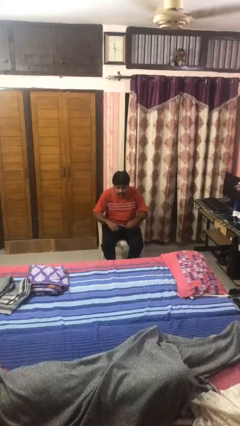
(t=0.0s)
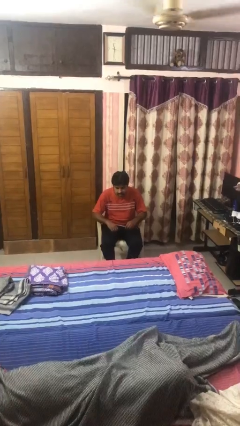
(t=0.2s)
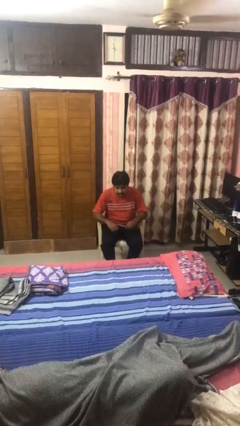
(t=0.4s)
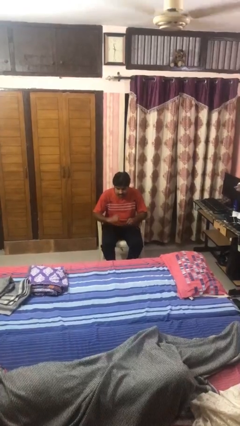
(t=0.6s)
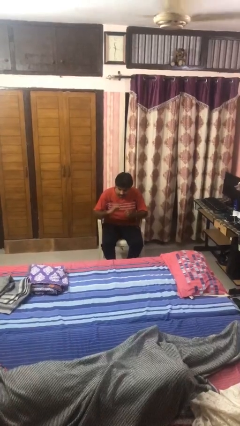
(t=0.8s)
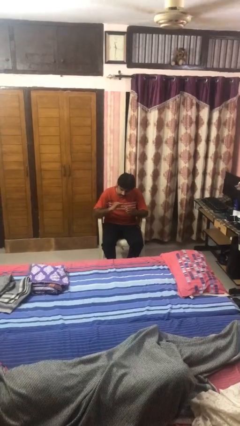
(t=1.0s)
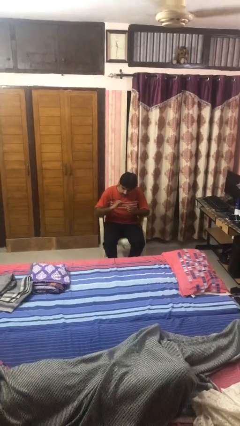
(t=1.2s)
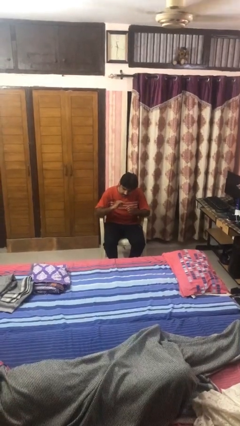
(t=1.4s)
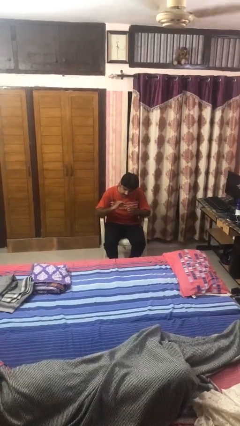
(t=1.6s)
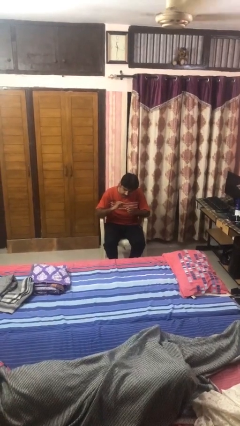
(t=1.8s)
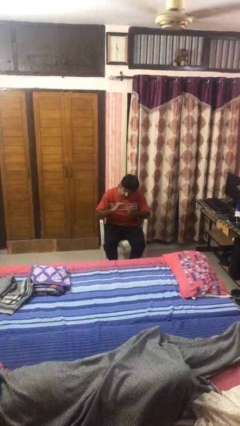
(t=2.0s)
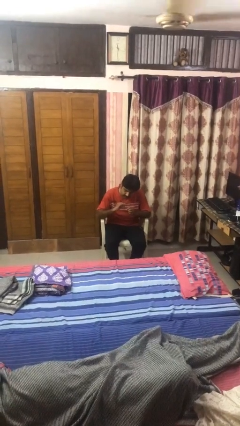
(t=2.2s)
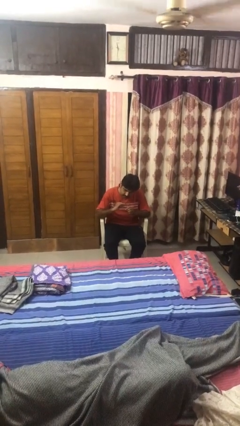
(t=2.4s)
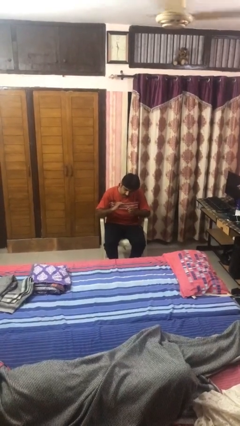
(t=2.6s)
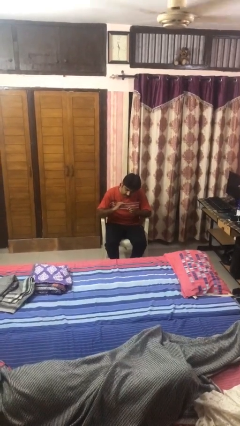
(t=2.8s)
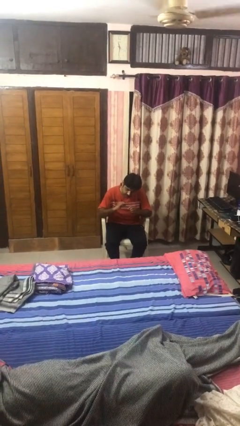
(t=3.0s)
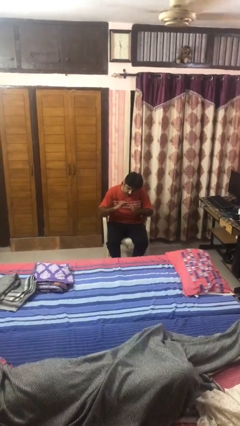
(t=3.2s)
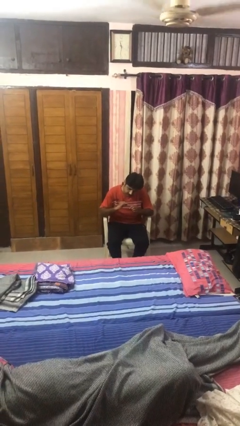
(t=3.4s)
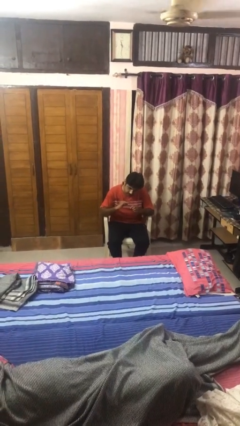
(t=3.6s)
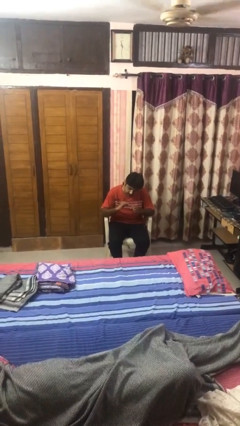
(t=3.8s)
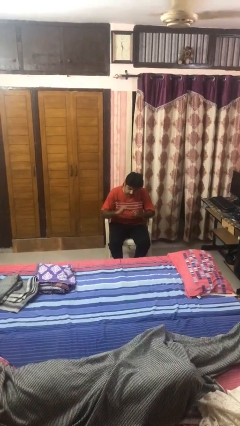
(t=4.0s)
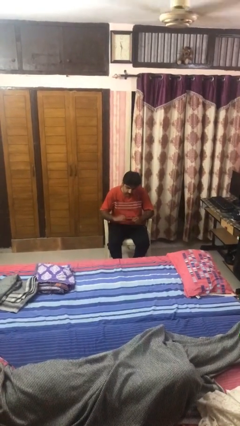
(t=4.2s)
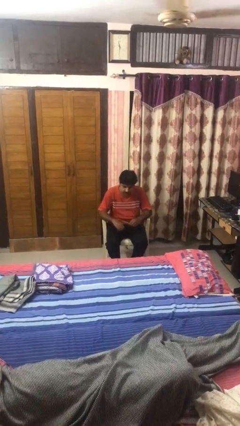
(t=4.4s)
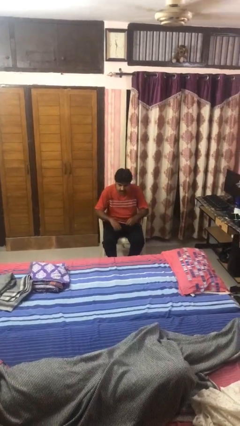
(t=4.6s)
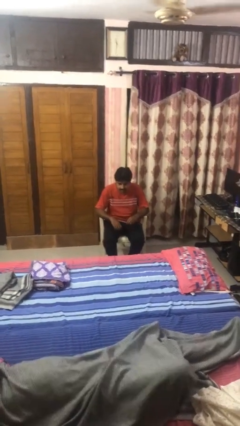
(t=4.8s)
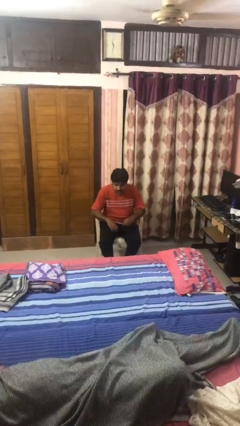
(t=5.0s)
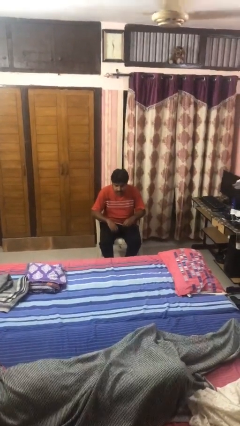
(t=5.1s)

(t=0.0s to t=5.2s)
person files fingernails

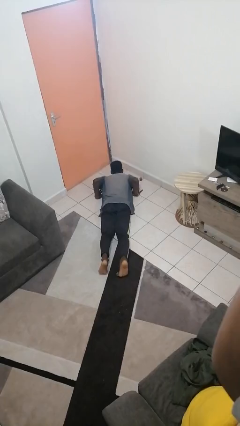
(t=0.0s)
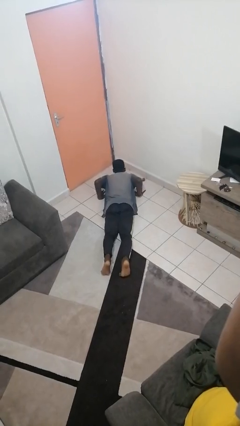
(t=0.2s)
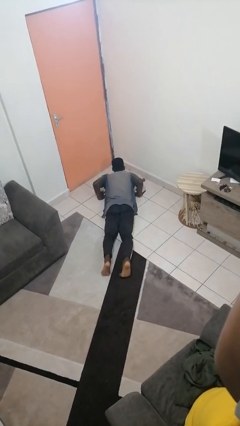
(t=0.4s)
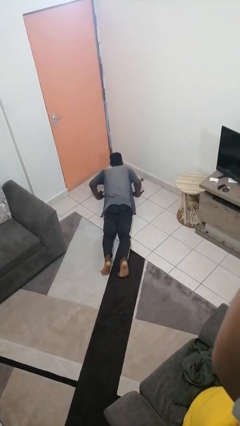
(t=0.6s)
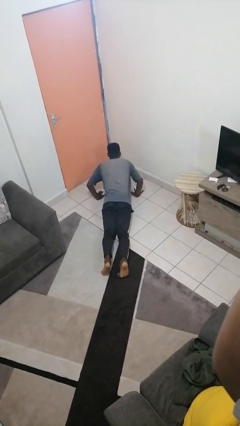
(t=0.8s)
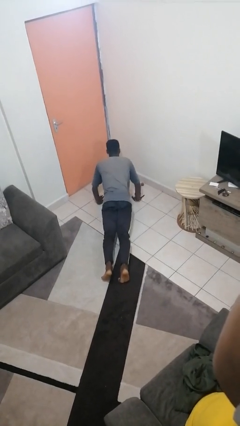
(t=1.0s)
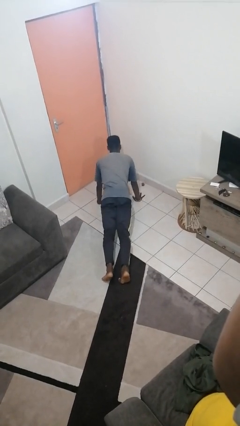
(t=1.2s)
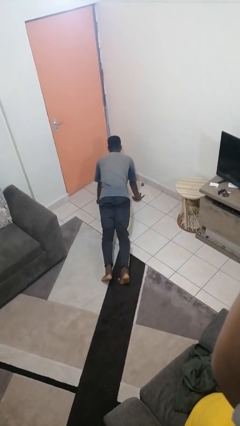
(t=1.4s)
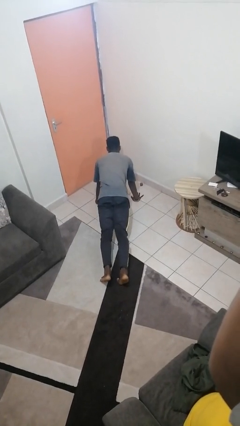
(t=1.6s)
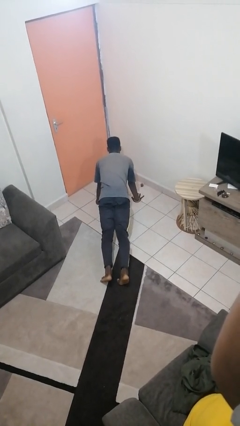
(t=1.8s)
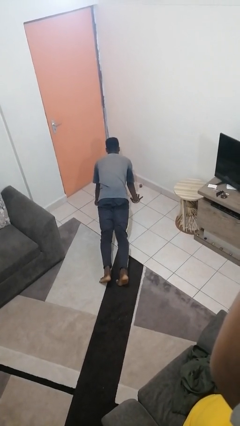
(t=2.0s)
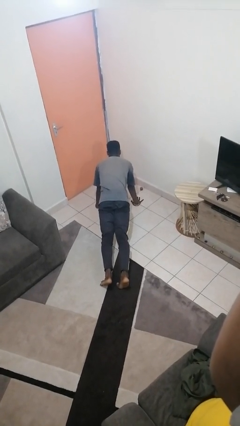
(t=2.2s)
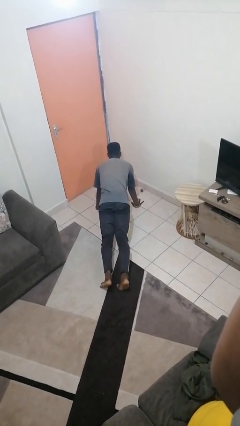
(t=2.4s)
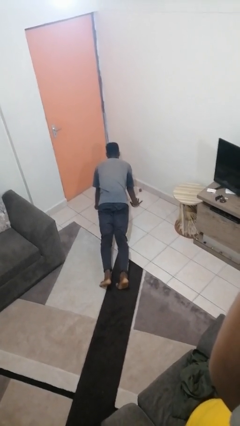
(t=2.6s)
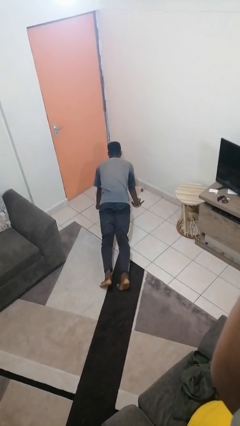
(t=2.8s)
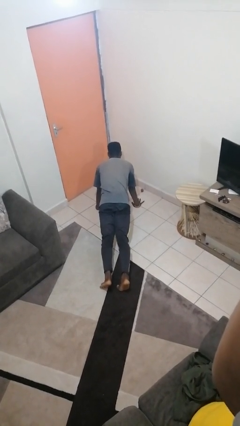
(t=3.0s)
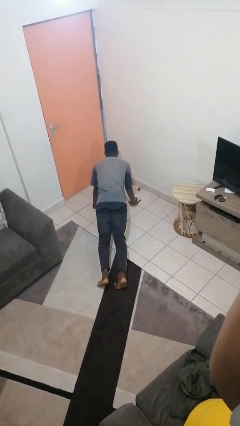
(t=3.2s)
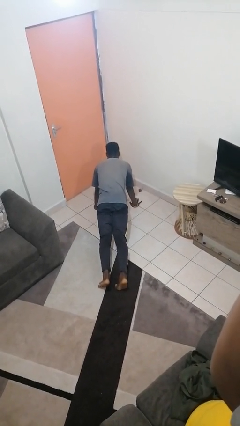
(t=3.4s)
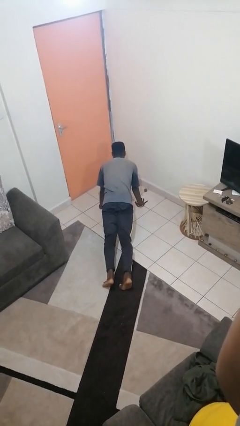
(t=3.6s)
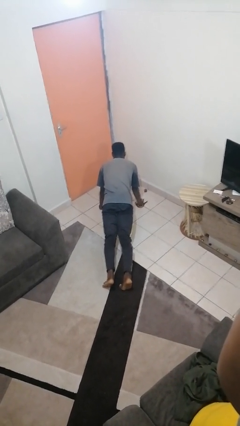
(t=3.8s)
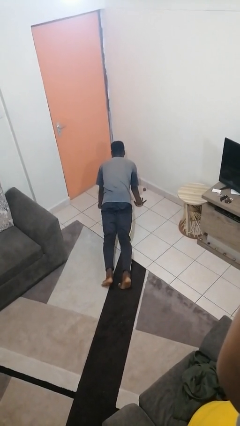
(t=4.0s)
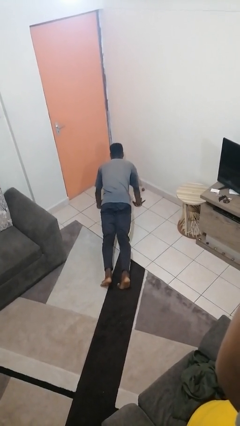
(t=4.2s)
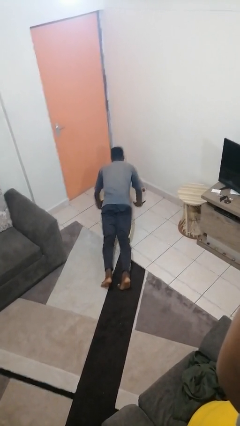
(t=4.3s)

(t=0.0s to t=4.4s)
person exercises with pushup

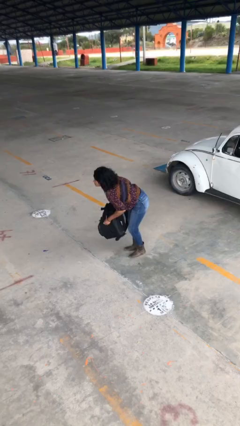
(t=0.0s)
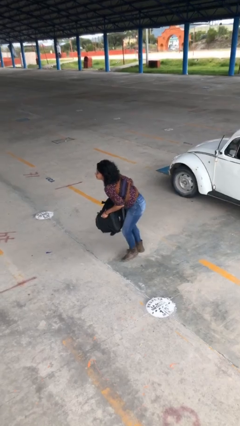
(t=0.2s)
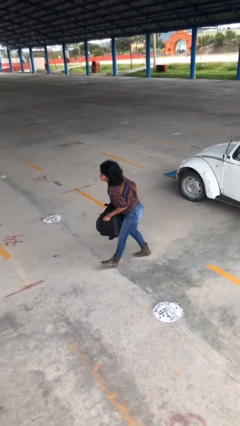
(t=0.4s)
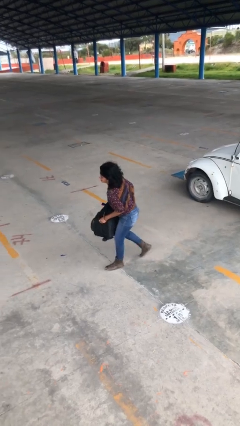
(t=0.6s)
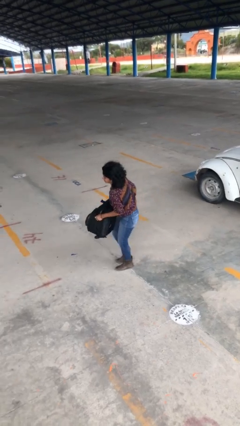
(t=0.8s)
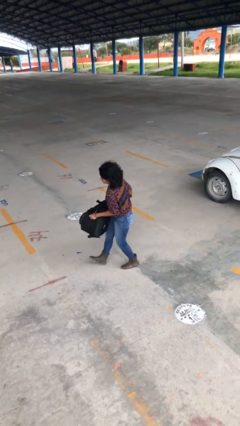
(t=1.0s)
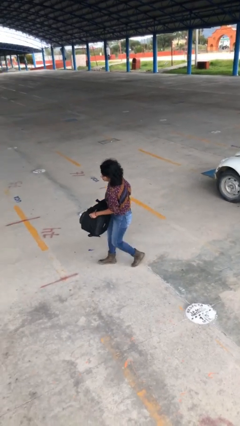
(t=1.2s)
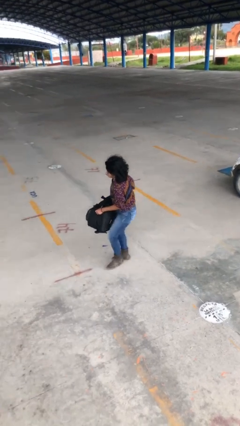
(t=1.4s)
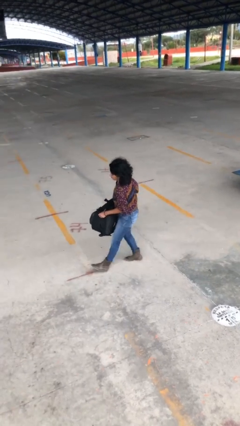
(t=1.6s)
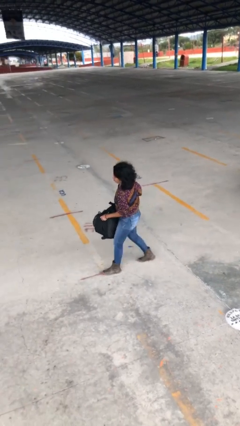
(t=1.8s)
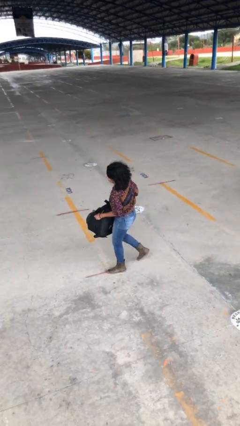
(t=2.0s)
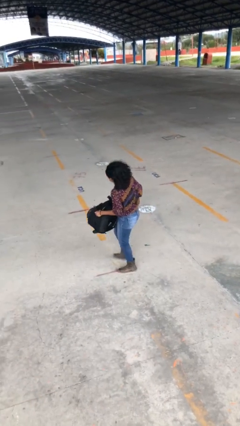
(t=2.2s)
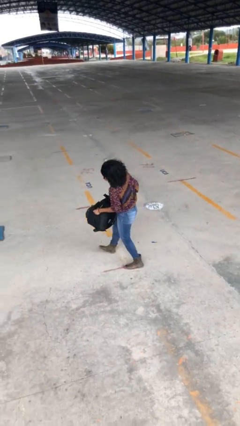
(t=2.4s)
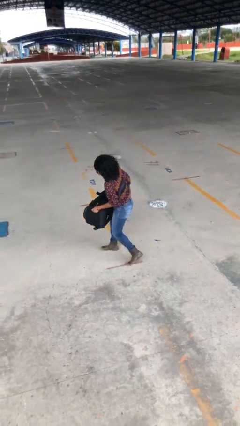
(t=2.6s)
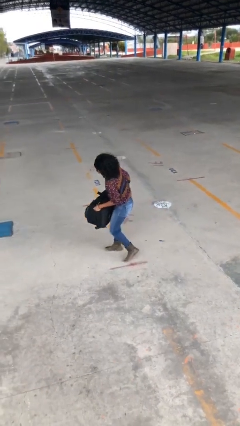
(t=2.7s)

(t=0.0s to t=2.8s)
person carries heavy object

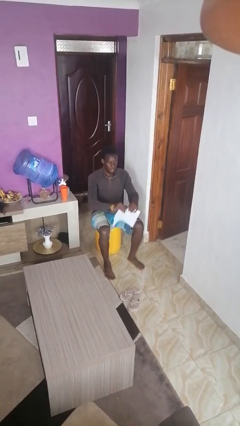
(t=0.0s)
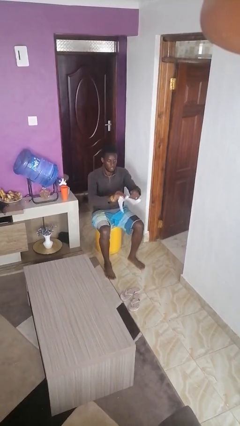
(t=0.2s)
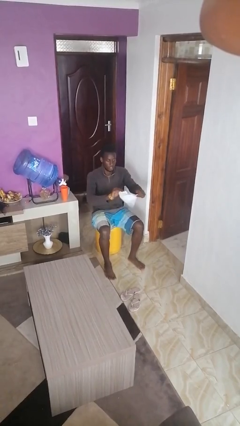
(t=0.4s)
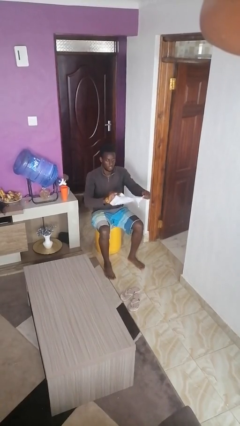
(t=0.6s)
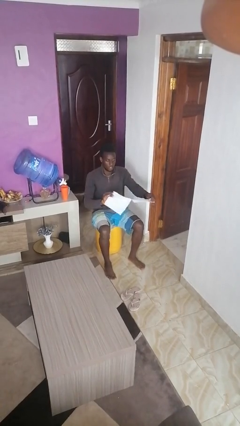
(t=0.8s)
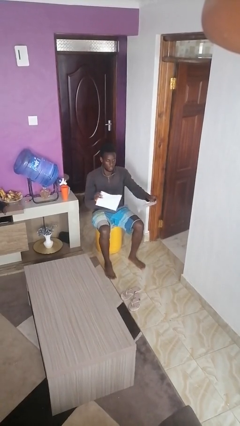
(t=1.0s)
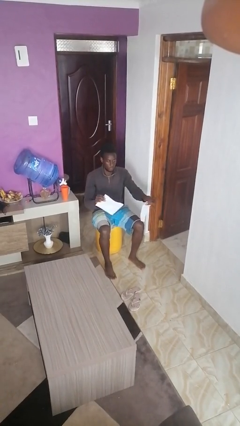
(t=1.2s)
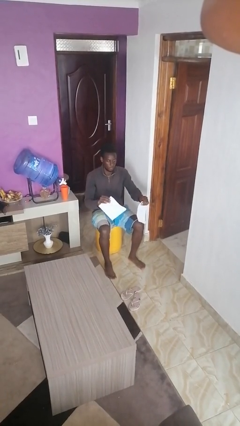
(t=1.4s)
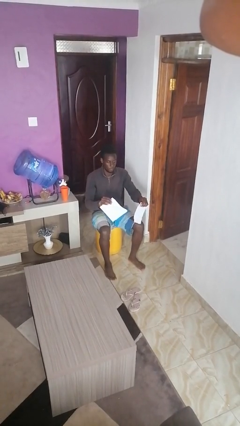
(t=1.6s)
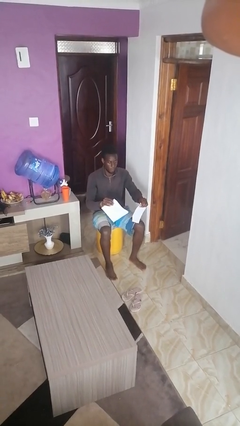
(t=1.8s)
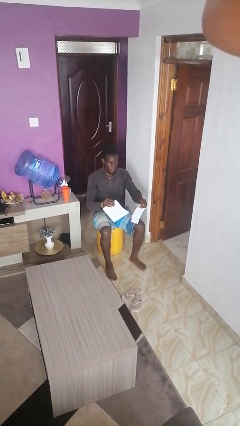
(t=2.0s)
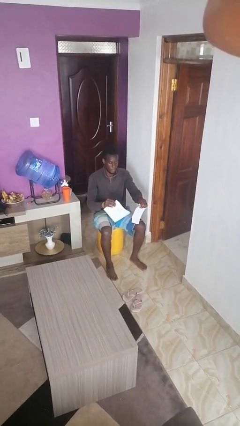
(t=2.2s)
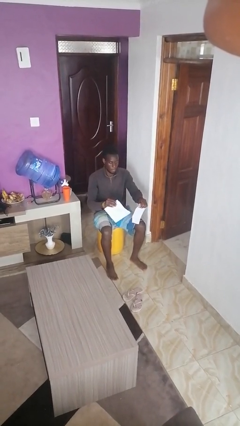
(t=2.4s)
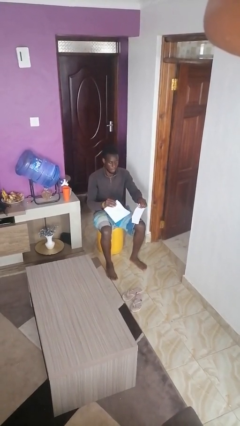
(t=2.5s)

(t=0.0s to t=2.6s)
person tears paper

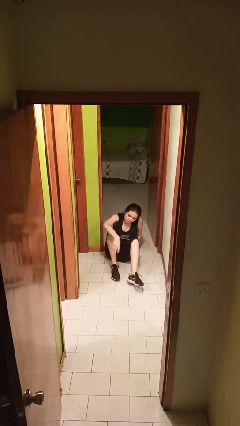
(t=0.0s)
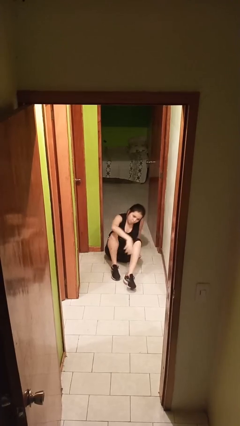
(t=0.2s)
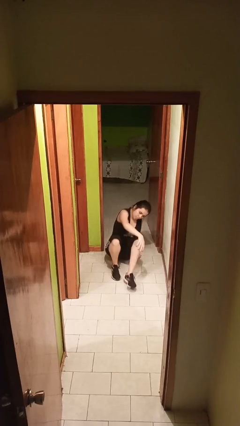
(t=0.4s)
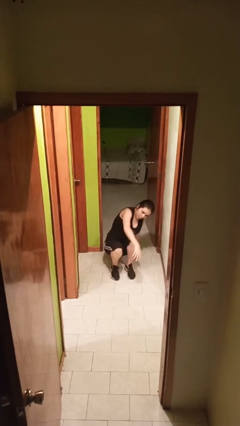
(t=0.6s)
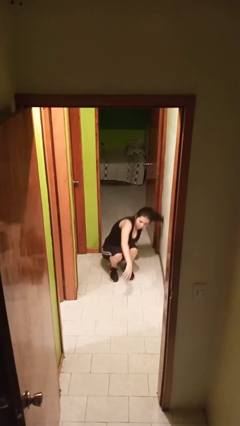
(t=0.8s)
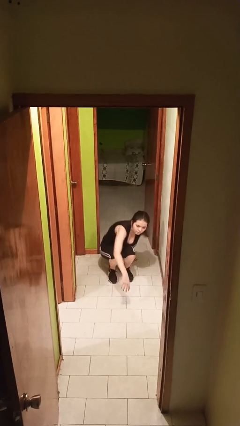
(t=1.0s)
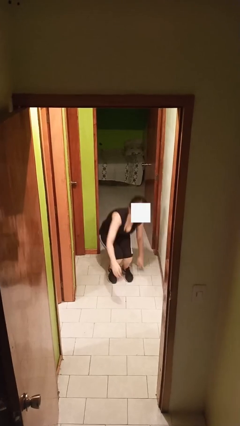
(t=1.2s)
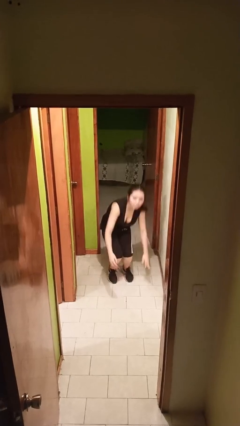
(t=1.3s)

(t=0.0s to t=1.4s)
person stands up

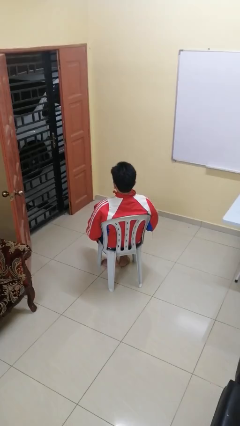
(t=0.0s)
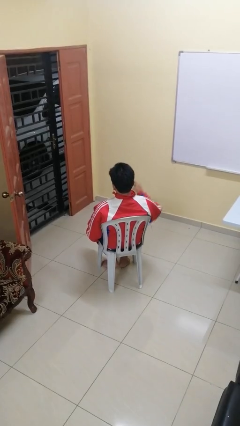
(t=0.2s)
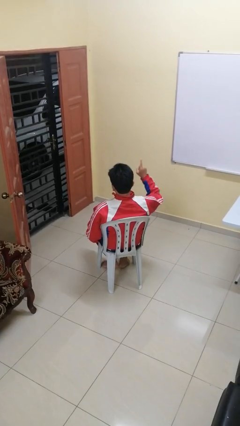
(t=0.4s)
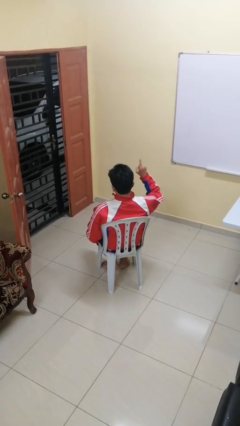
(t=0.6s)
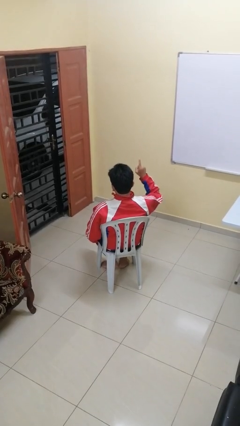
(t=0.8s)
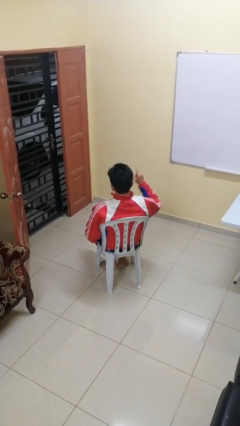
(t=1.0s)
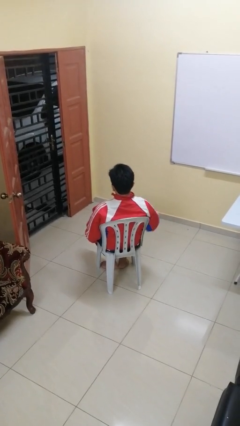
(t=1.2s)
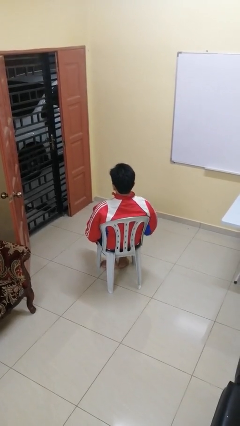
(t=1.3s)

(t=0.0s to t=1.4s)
person gestures number one
